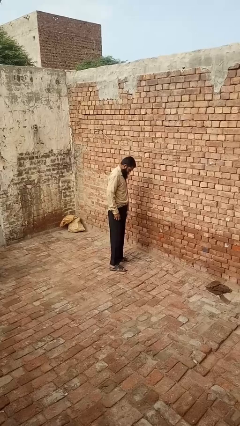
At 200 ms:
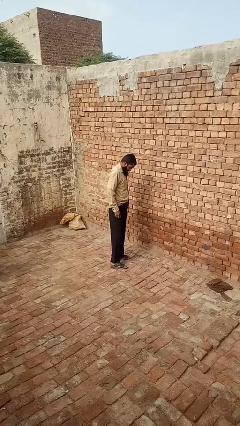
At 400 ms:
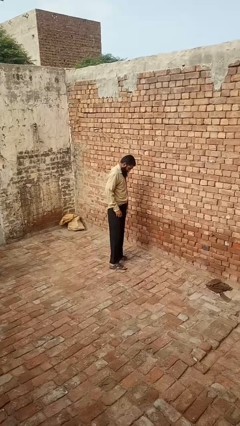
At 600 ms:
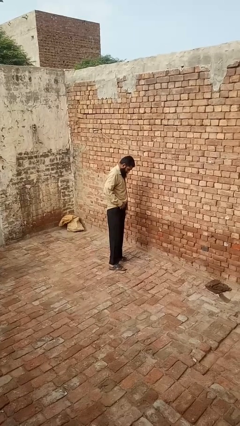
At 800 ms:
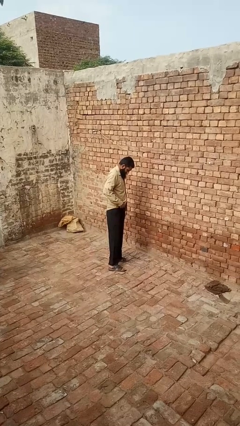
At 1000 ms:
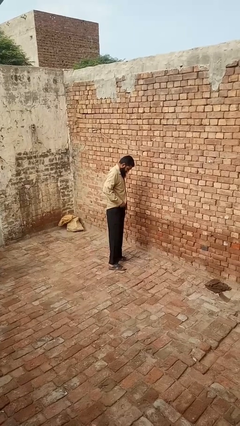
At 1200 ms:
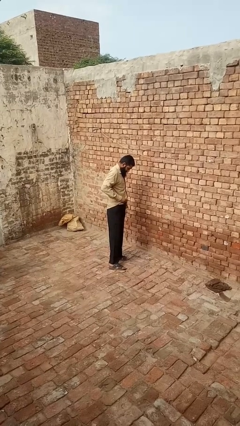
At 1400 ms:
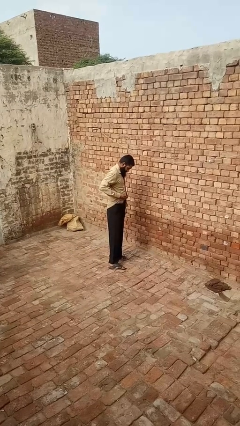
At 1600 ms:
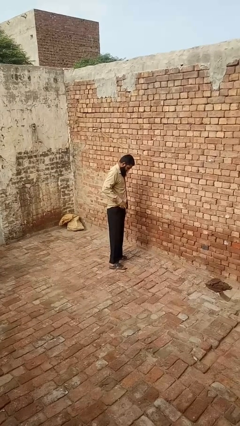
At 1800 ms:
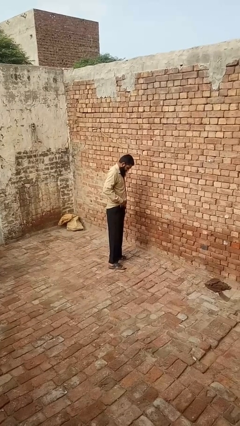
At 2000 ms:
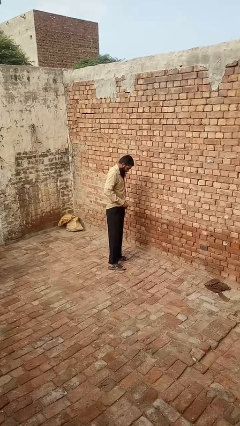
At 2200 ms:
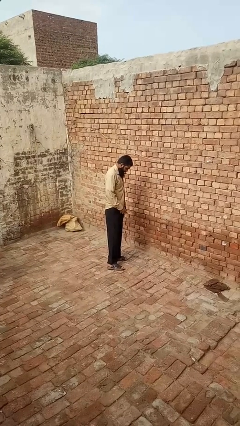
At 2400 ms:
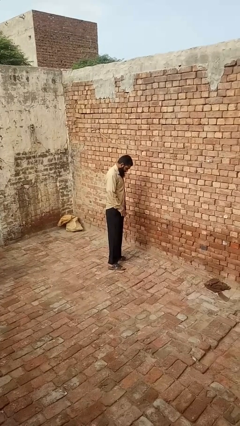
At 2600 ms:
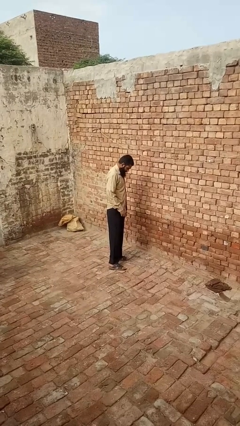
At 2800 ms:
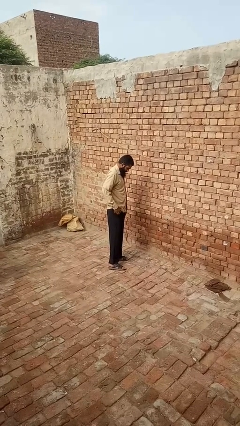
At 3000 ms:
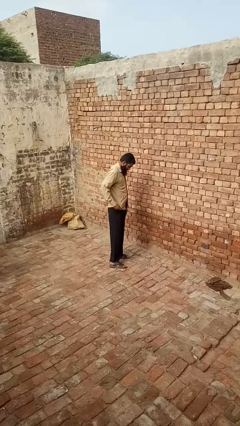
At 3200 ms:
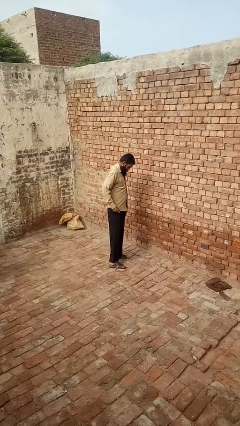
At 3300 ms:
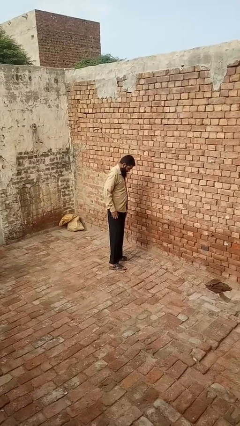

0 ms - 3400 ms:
person untucks shirt

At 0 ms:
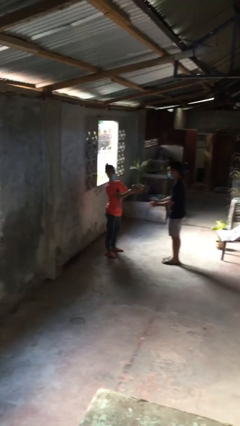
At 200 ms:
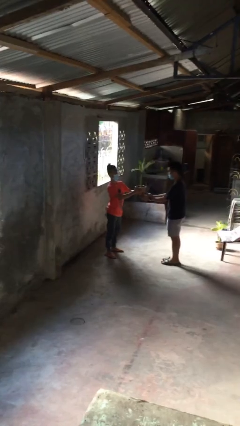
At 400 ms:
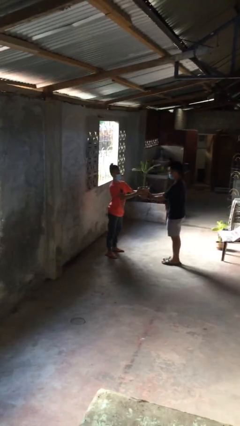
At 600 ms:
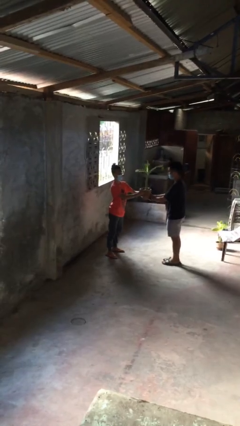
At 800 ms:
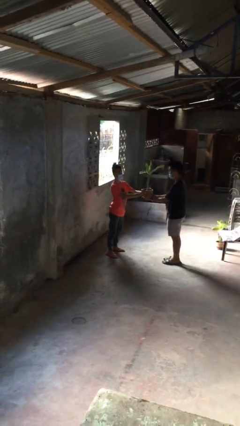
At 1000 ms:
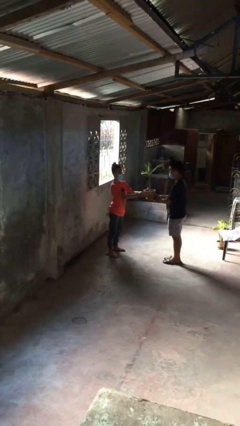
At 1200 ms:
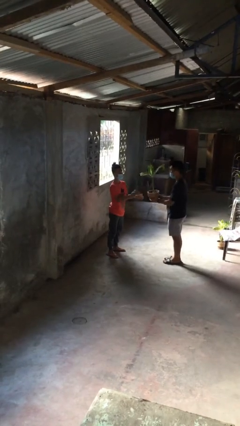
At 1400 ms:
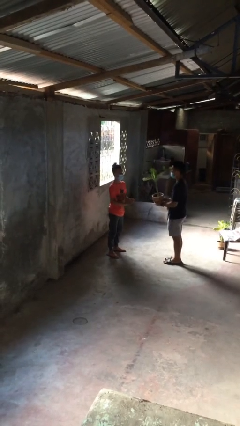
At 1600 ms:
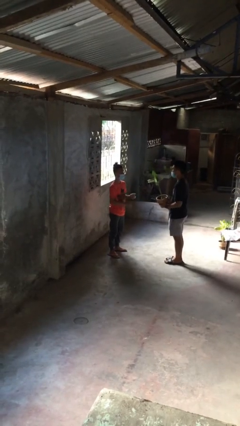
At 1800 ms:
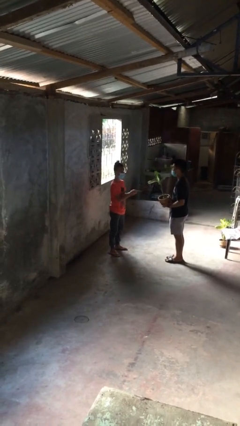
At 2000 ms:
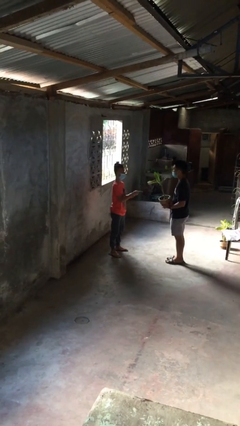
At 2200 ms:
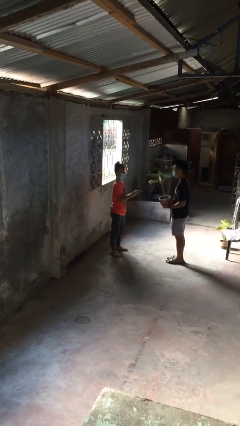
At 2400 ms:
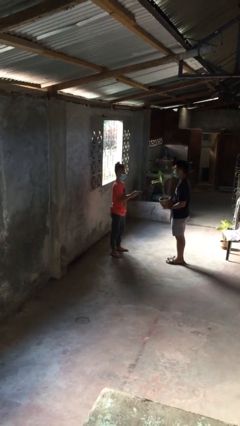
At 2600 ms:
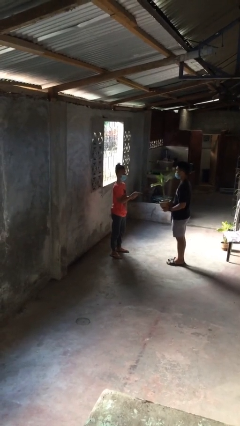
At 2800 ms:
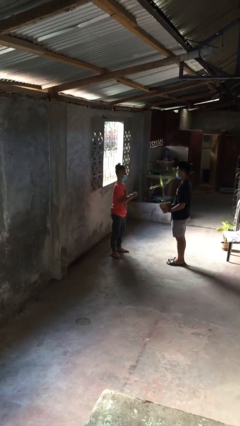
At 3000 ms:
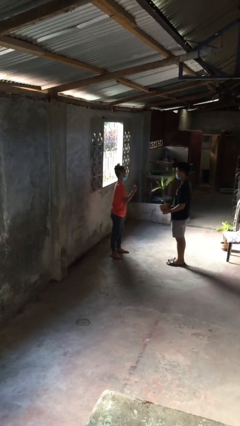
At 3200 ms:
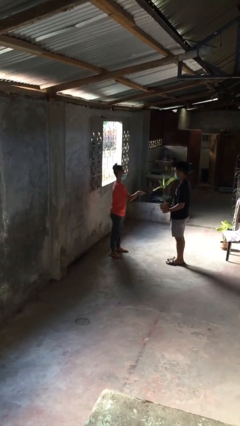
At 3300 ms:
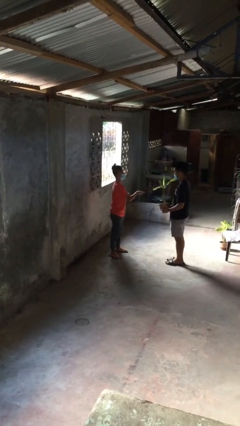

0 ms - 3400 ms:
person transfers object to person

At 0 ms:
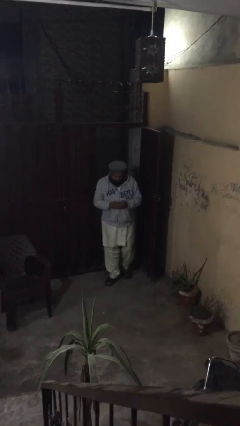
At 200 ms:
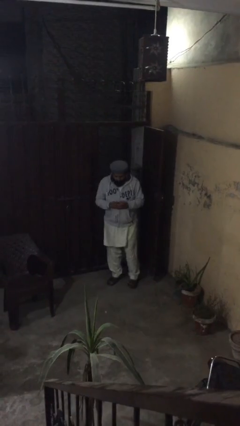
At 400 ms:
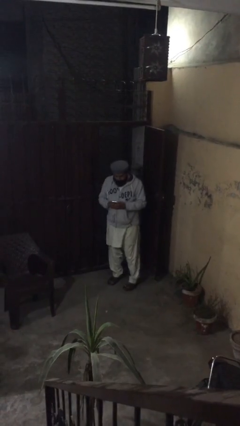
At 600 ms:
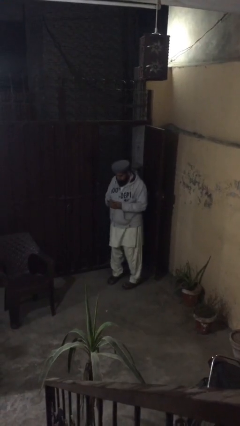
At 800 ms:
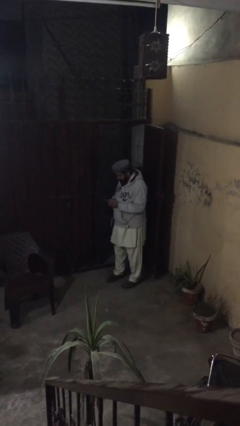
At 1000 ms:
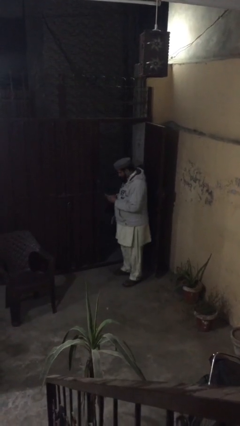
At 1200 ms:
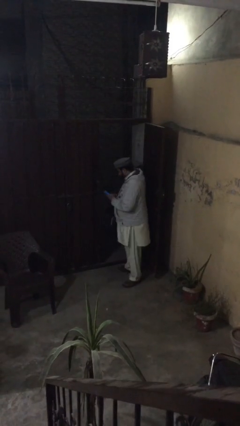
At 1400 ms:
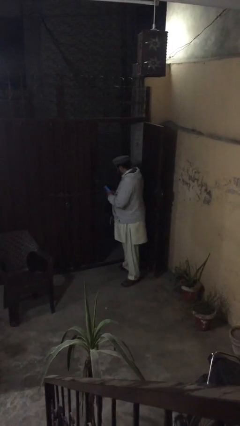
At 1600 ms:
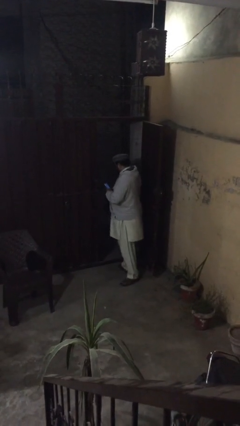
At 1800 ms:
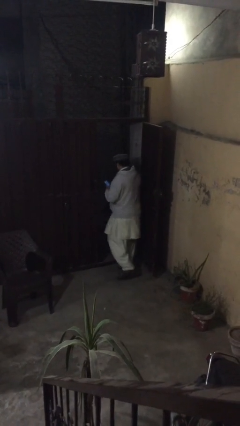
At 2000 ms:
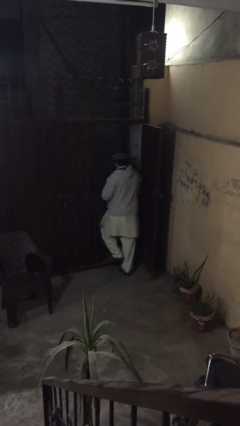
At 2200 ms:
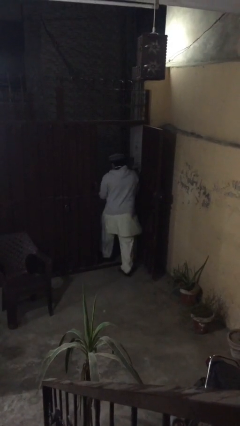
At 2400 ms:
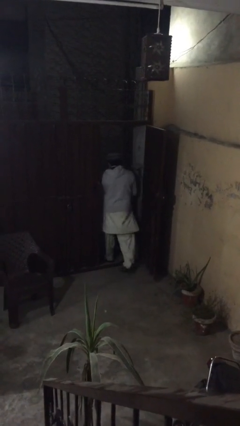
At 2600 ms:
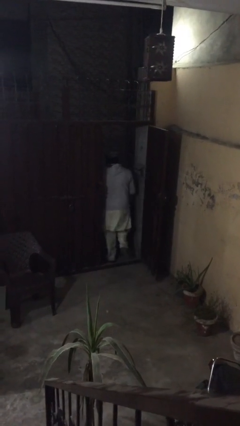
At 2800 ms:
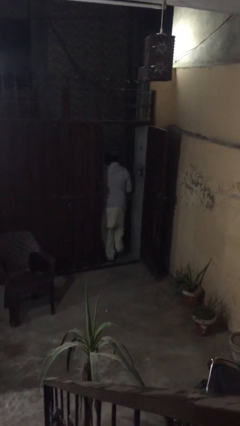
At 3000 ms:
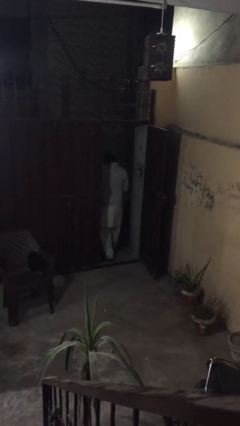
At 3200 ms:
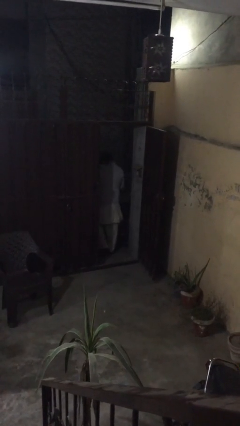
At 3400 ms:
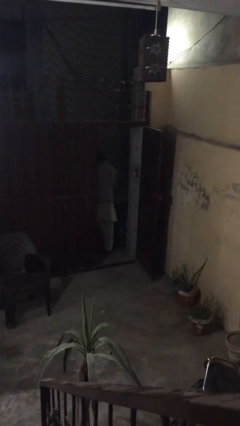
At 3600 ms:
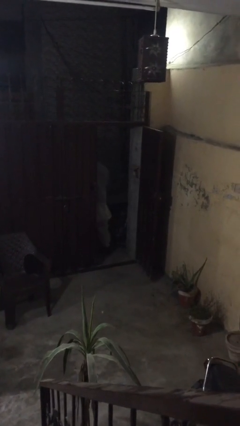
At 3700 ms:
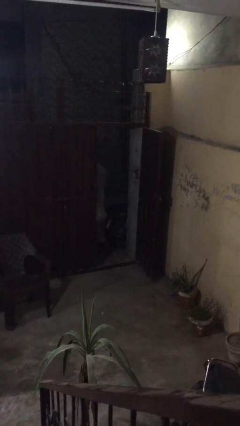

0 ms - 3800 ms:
person exits scene through structure

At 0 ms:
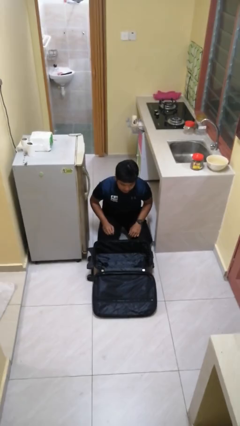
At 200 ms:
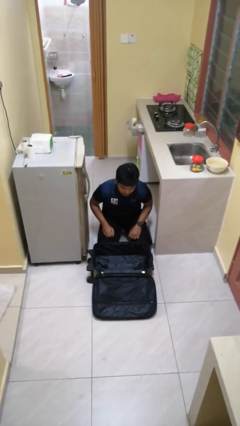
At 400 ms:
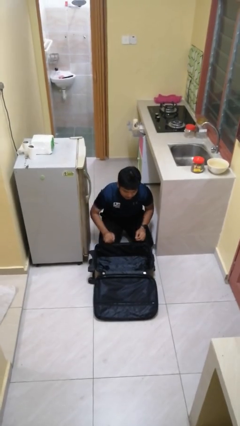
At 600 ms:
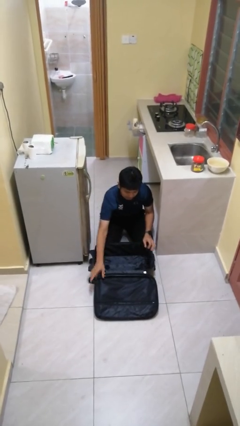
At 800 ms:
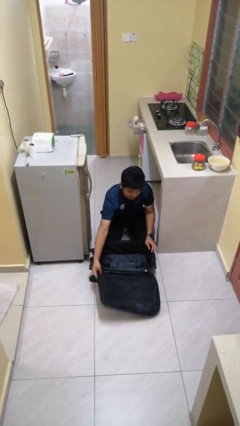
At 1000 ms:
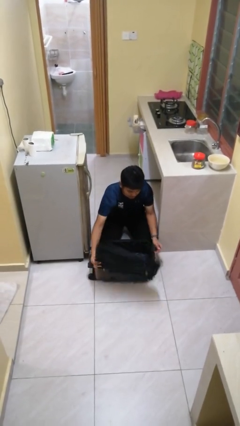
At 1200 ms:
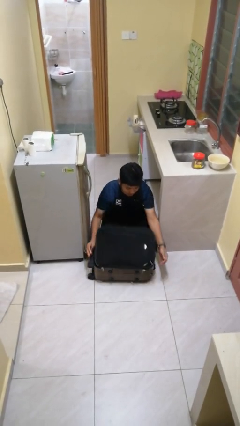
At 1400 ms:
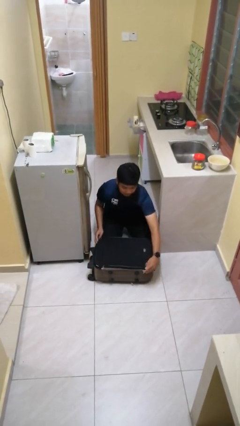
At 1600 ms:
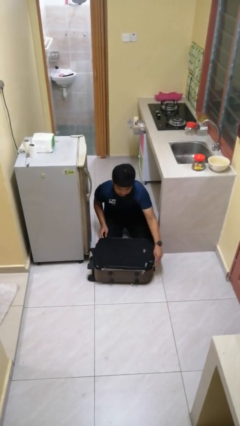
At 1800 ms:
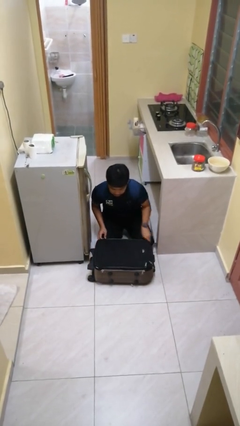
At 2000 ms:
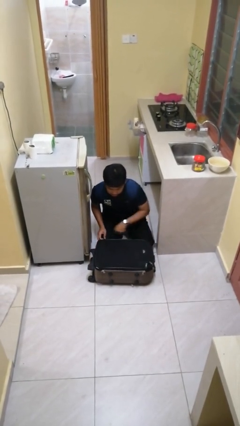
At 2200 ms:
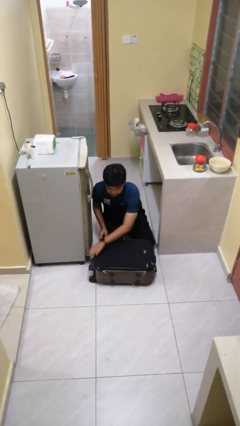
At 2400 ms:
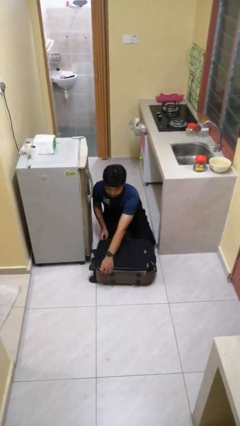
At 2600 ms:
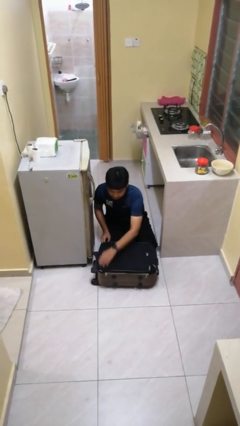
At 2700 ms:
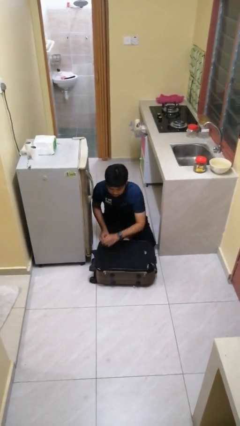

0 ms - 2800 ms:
person closes suitcase

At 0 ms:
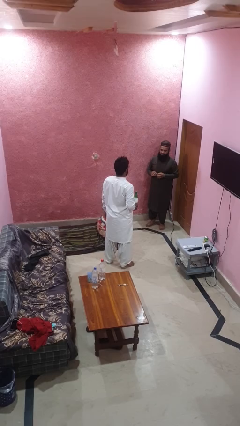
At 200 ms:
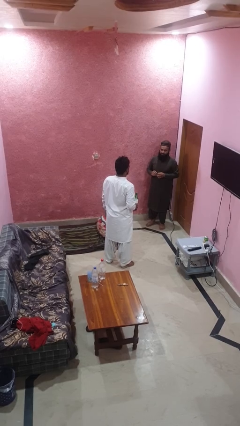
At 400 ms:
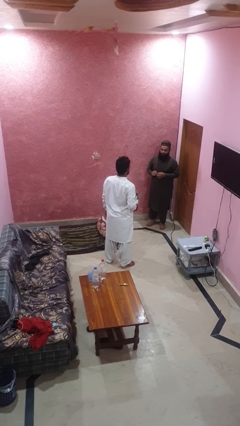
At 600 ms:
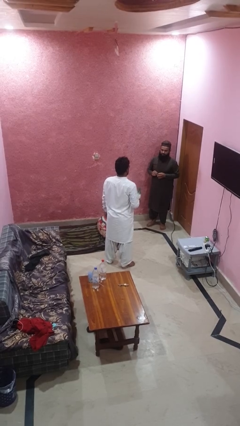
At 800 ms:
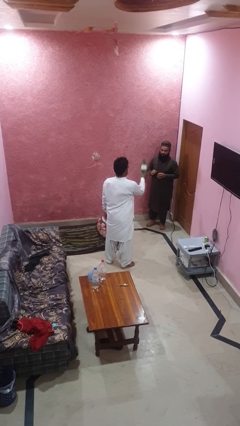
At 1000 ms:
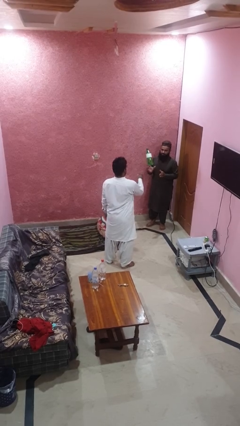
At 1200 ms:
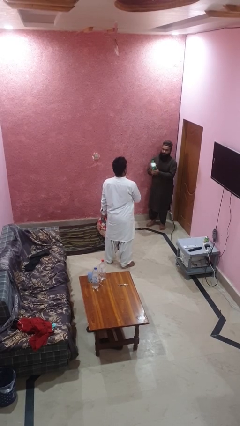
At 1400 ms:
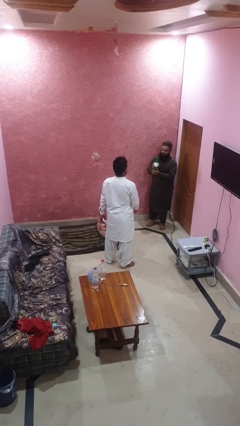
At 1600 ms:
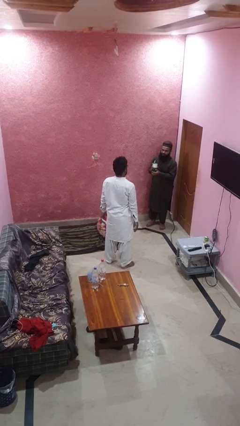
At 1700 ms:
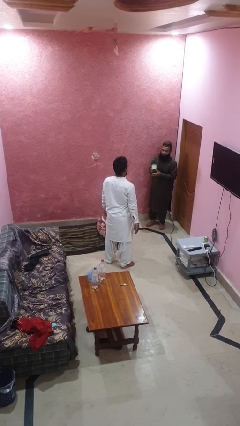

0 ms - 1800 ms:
person throws object to person

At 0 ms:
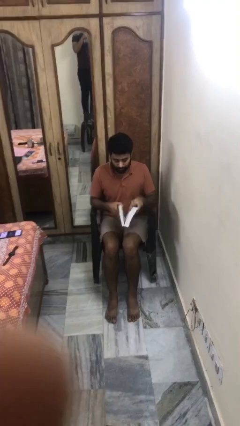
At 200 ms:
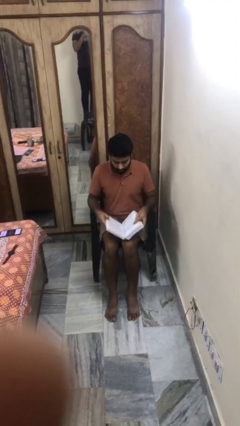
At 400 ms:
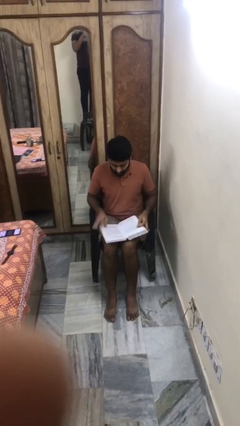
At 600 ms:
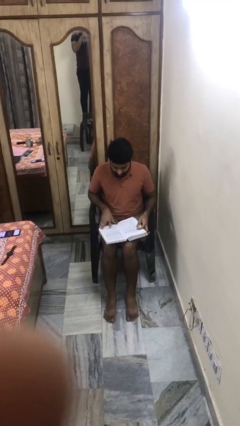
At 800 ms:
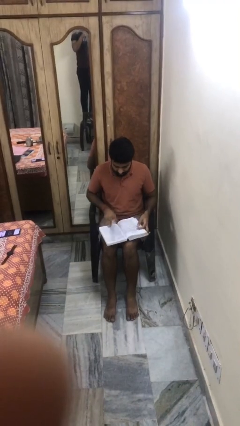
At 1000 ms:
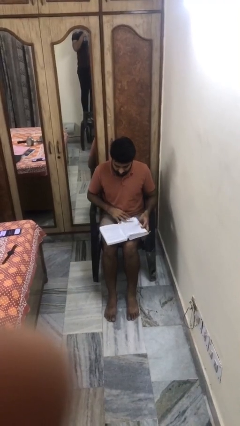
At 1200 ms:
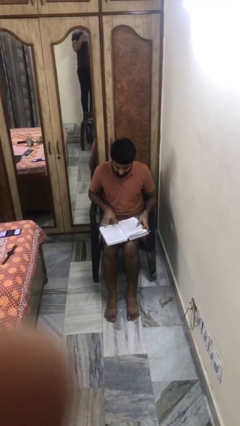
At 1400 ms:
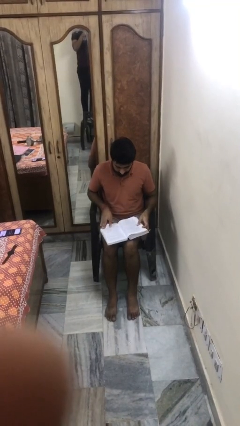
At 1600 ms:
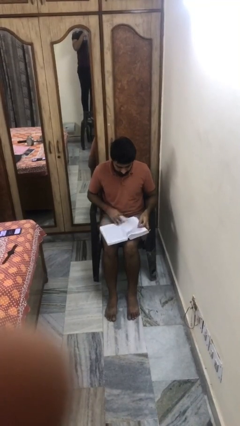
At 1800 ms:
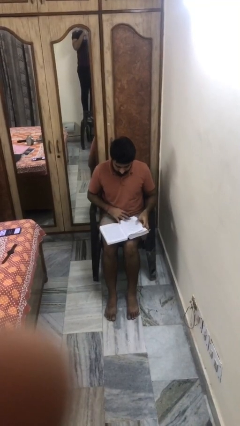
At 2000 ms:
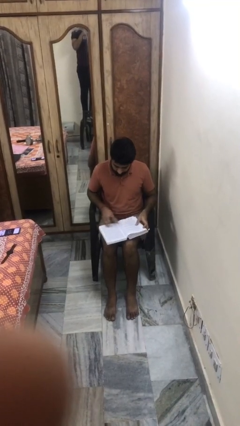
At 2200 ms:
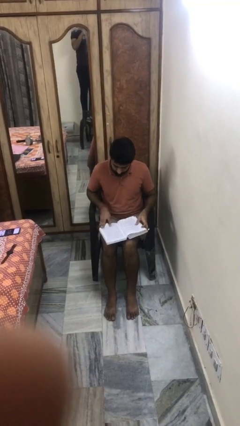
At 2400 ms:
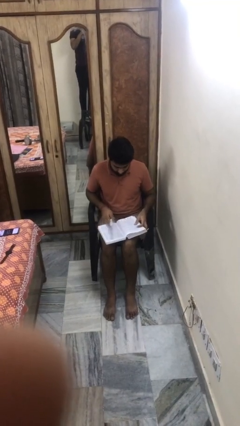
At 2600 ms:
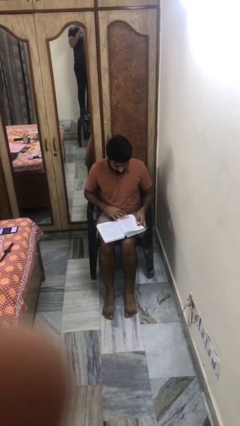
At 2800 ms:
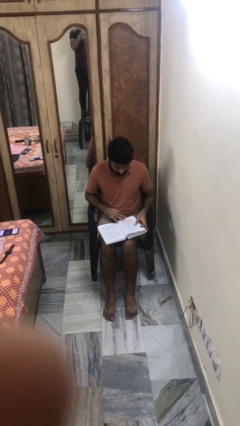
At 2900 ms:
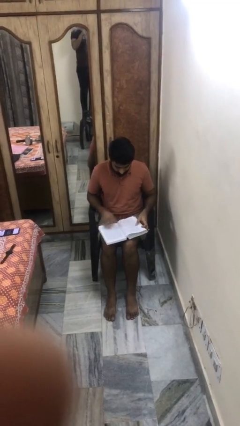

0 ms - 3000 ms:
person reads book
